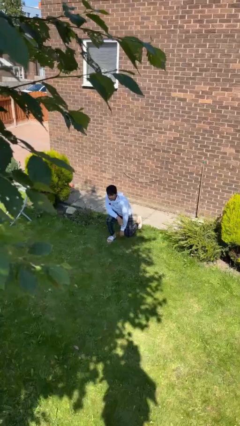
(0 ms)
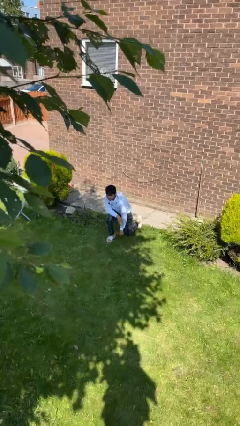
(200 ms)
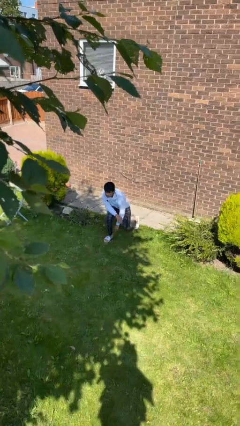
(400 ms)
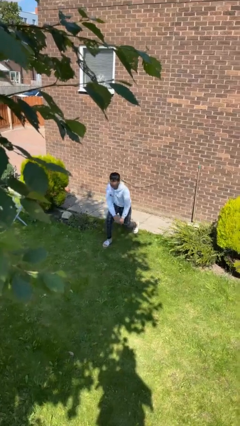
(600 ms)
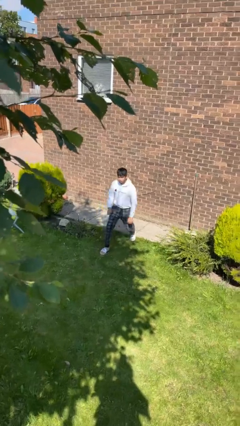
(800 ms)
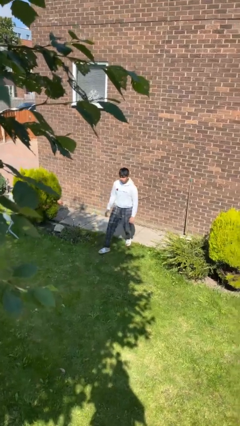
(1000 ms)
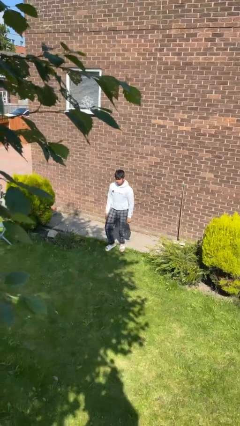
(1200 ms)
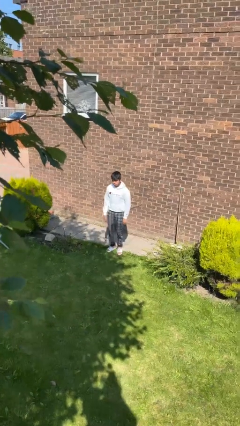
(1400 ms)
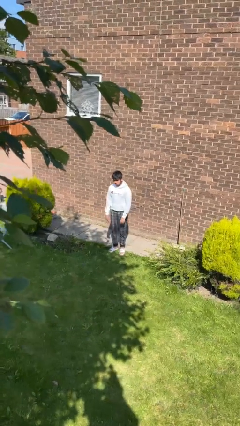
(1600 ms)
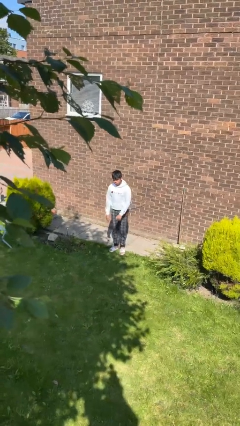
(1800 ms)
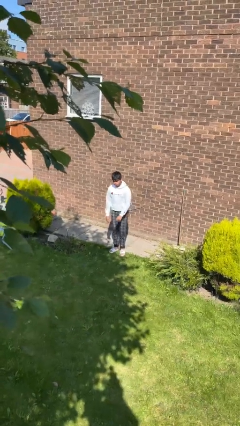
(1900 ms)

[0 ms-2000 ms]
person stands up from floor

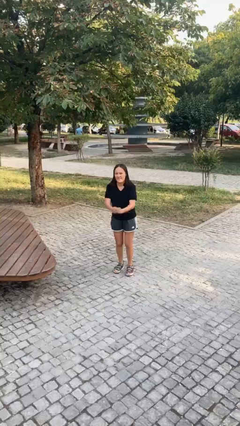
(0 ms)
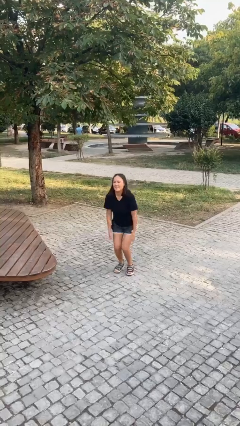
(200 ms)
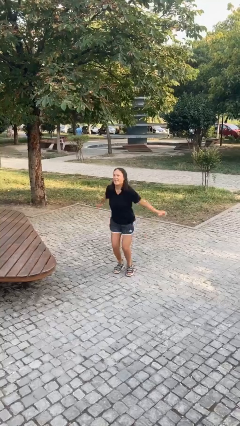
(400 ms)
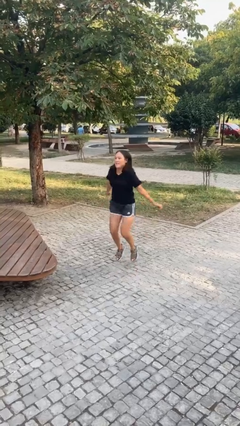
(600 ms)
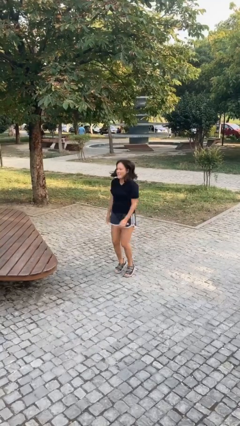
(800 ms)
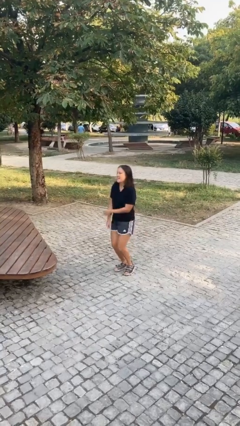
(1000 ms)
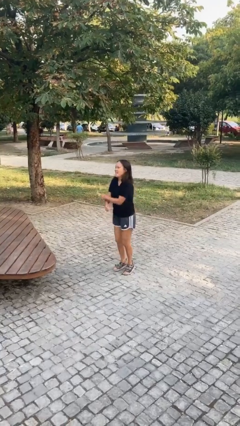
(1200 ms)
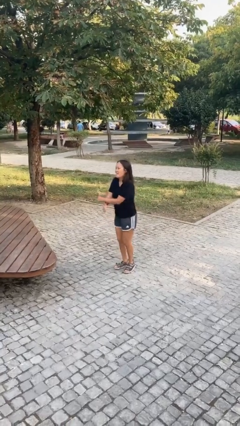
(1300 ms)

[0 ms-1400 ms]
person jumps

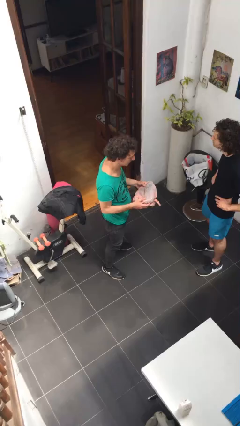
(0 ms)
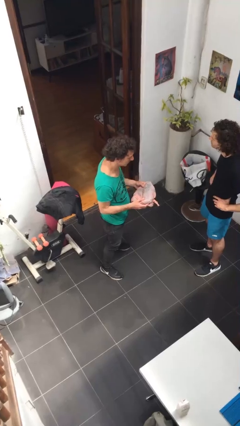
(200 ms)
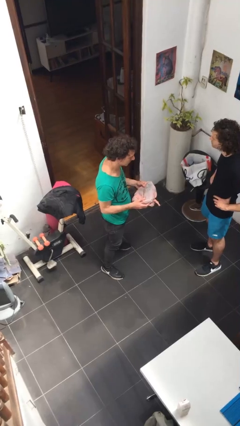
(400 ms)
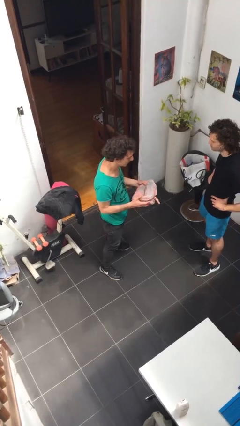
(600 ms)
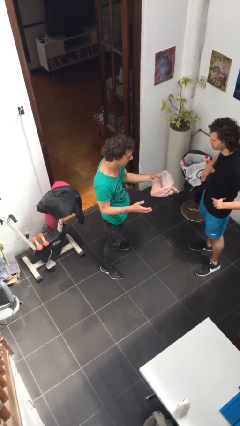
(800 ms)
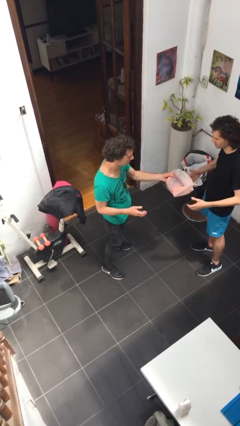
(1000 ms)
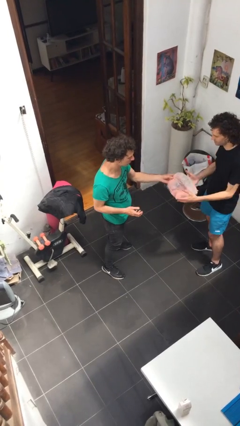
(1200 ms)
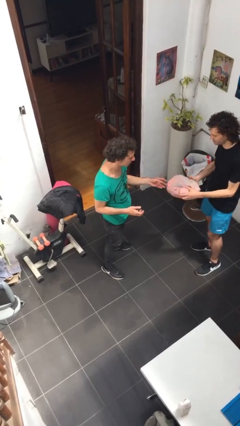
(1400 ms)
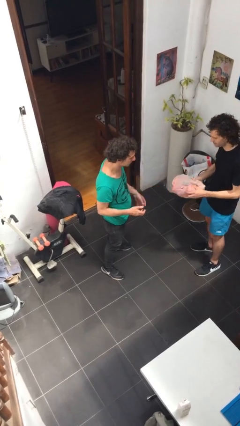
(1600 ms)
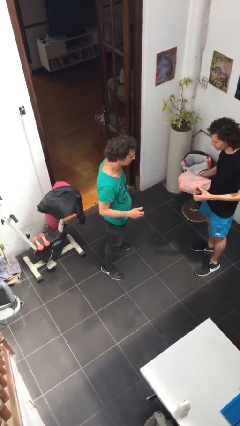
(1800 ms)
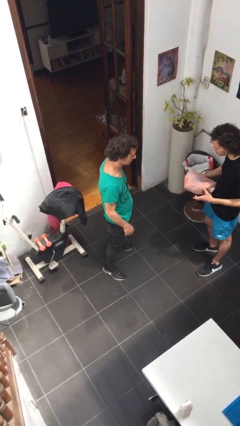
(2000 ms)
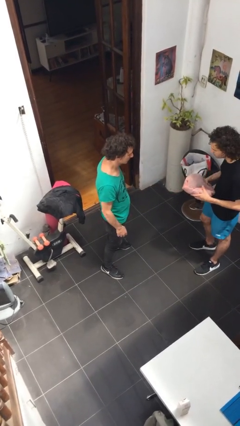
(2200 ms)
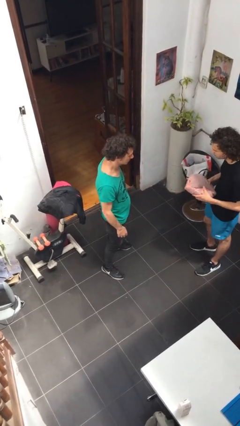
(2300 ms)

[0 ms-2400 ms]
person transfers object to person

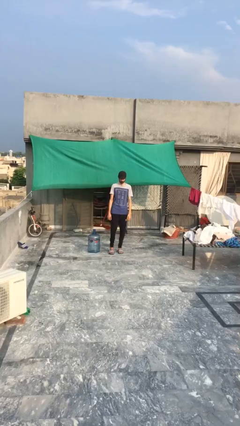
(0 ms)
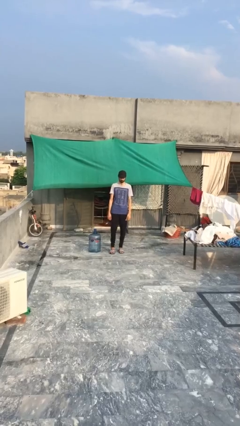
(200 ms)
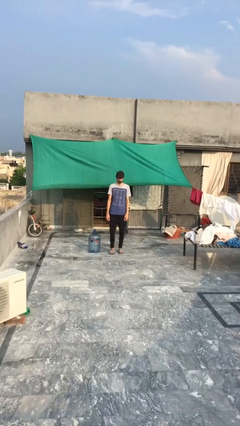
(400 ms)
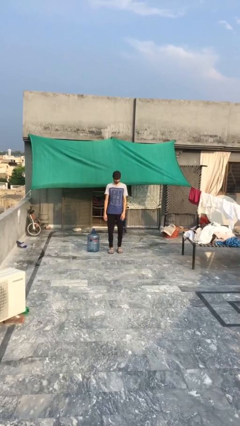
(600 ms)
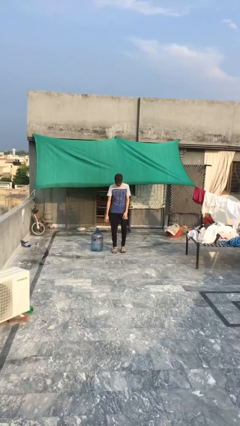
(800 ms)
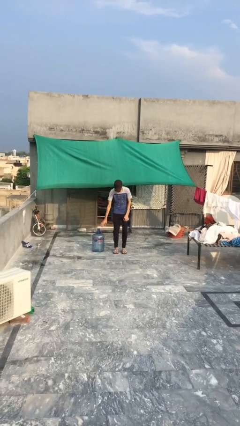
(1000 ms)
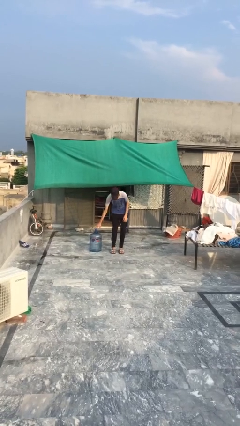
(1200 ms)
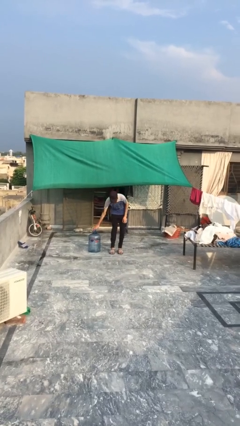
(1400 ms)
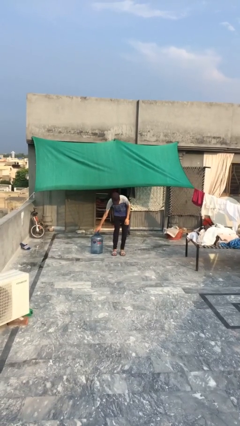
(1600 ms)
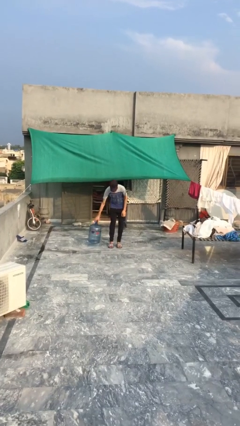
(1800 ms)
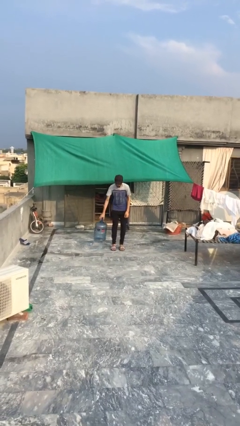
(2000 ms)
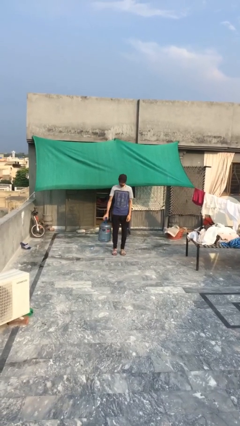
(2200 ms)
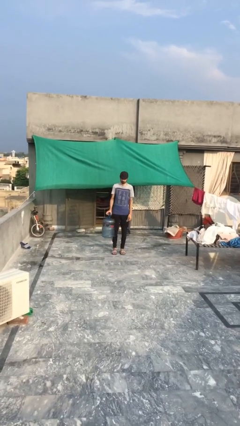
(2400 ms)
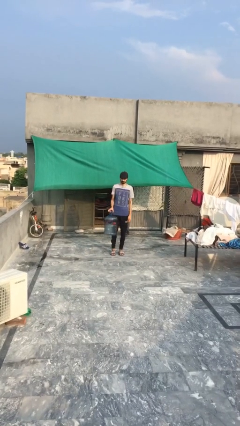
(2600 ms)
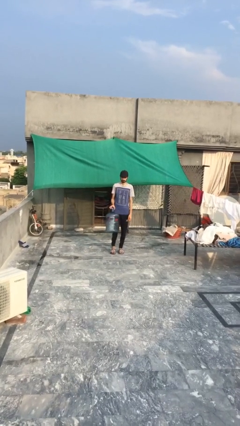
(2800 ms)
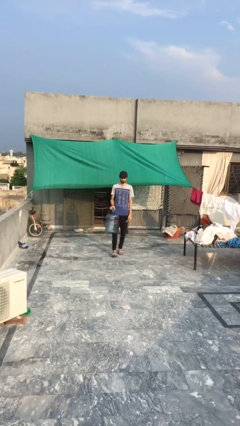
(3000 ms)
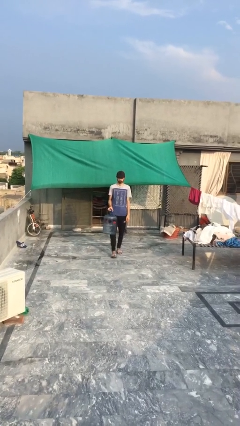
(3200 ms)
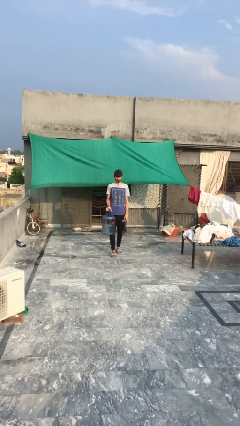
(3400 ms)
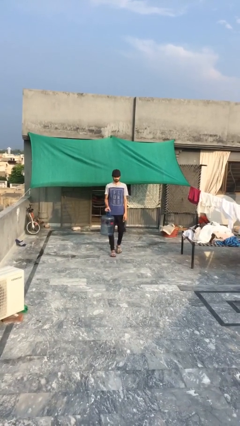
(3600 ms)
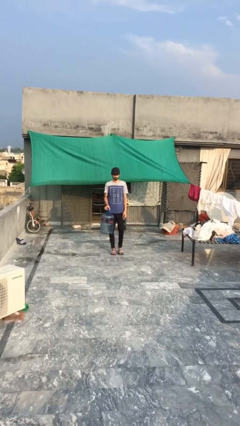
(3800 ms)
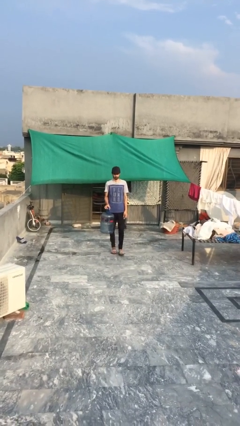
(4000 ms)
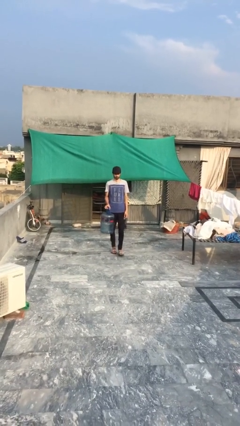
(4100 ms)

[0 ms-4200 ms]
person carries heavy object

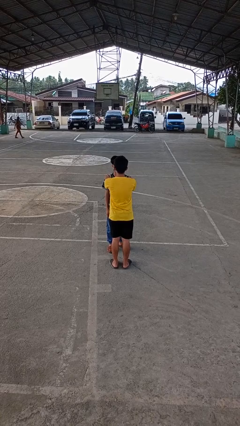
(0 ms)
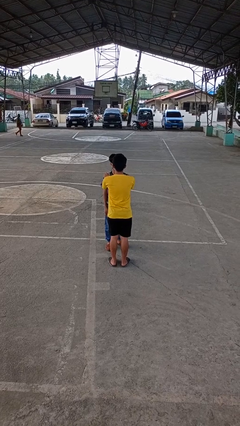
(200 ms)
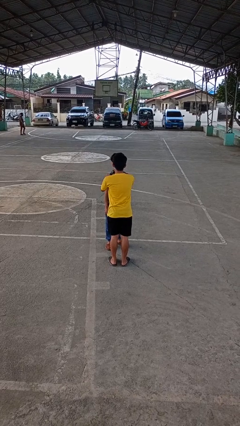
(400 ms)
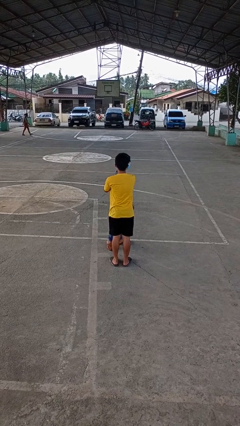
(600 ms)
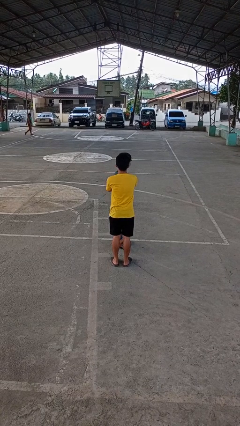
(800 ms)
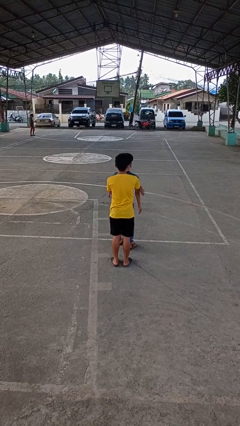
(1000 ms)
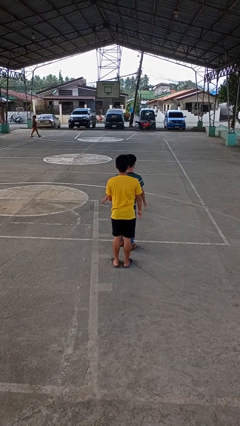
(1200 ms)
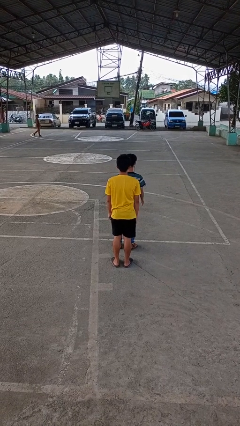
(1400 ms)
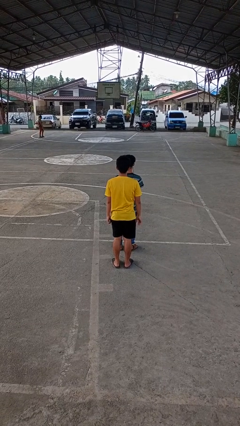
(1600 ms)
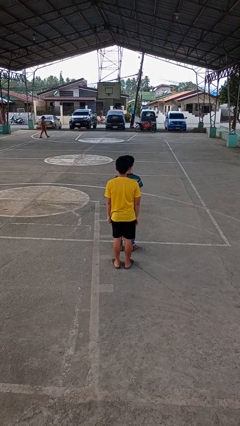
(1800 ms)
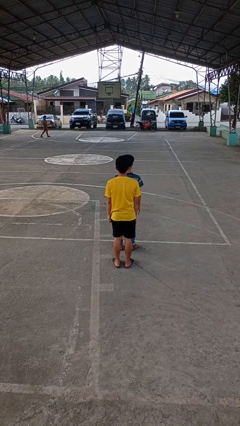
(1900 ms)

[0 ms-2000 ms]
person spins person around

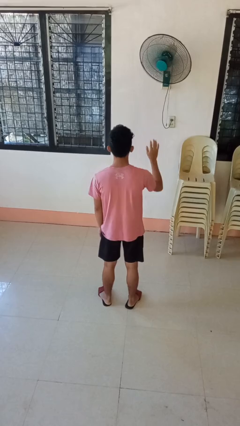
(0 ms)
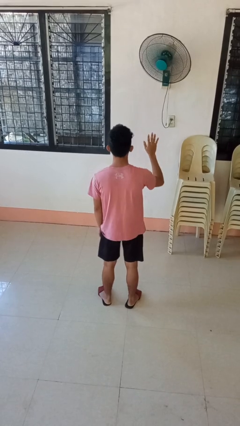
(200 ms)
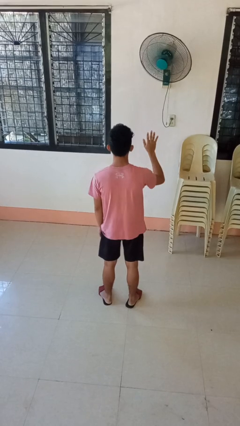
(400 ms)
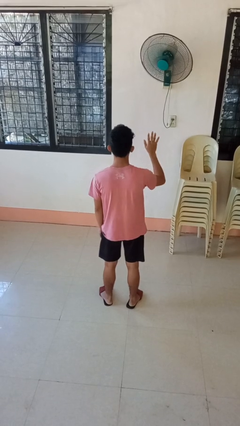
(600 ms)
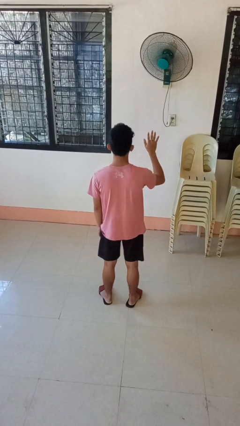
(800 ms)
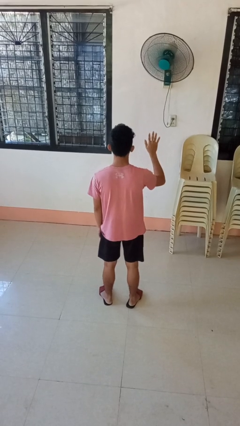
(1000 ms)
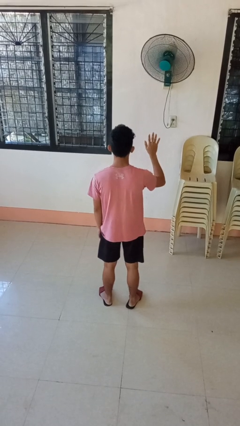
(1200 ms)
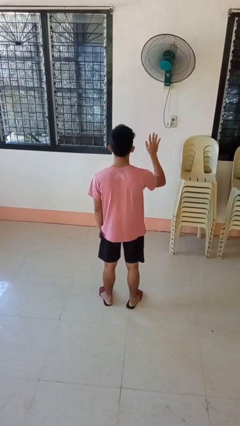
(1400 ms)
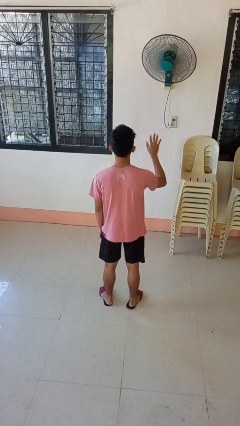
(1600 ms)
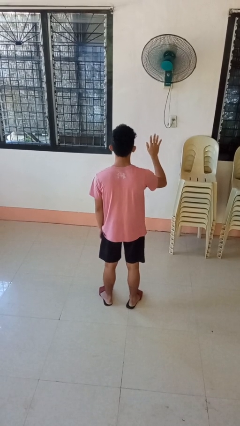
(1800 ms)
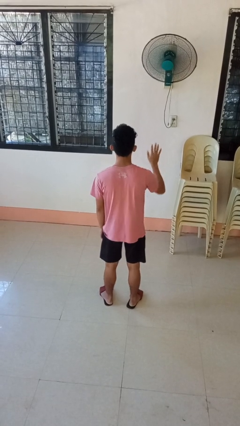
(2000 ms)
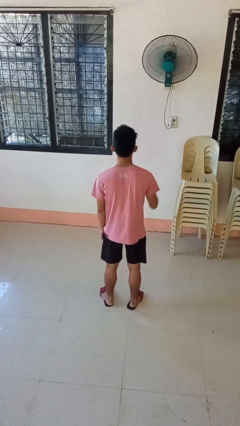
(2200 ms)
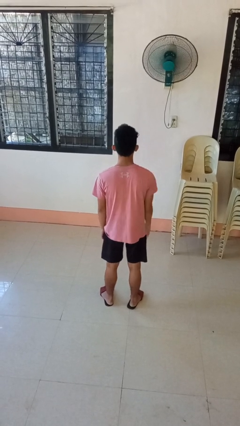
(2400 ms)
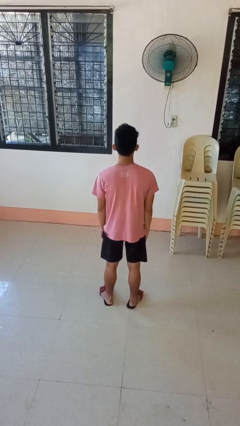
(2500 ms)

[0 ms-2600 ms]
person gestures number five

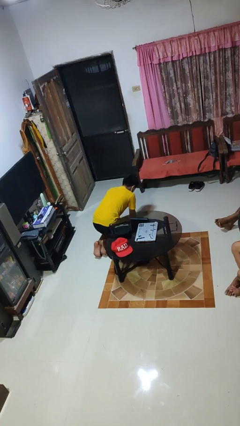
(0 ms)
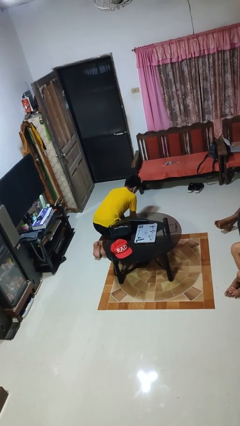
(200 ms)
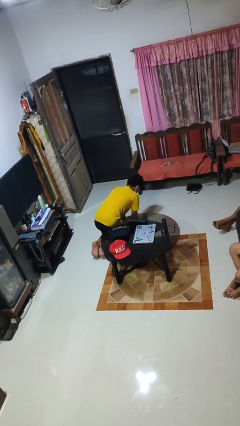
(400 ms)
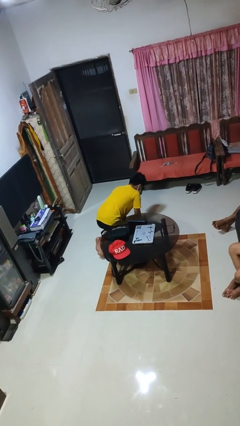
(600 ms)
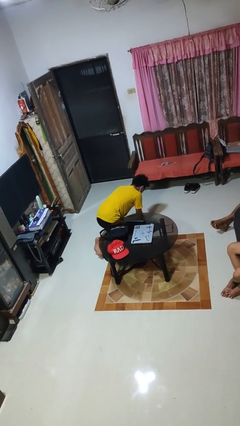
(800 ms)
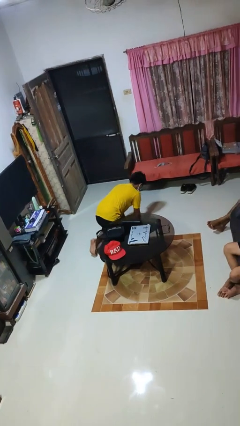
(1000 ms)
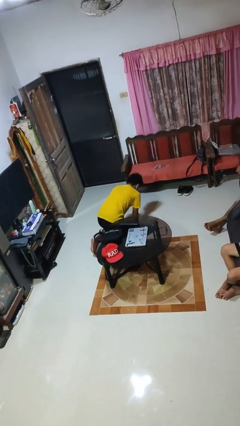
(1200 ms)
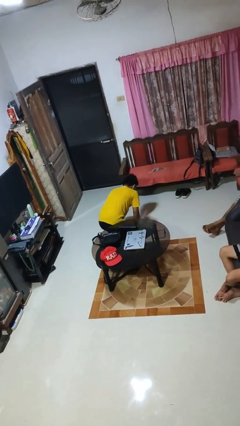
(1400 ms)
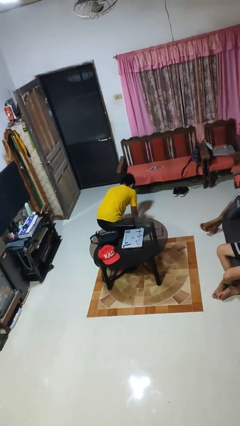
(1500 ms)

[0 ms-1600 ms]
person crawls

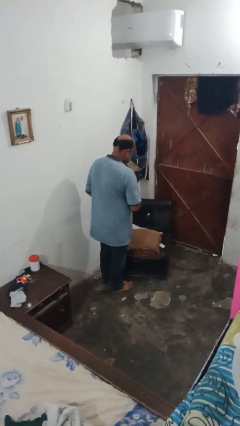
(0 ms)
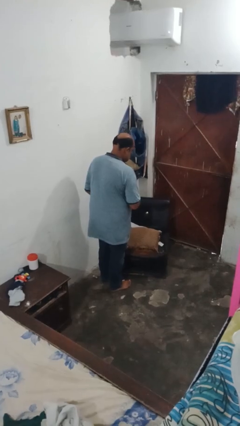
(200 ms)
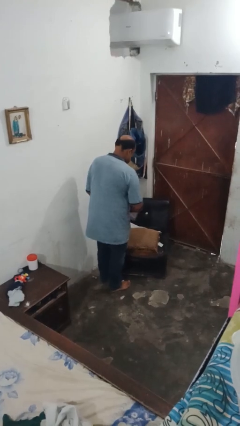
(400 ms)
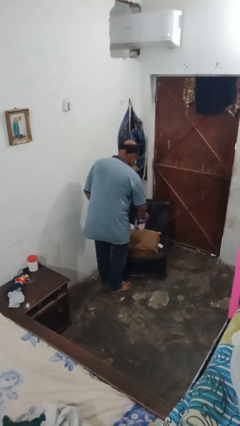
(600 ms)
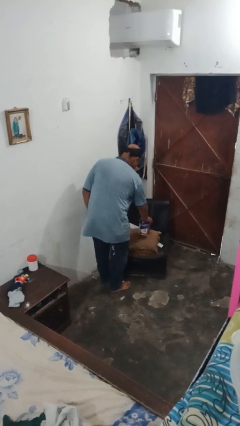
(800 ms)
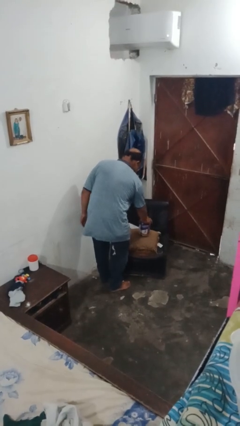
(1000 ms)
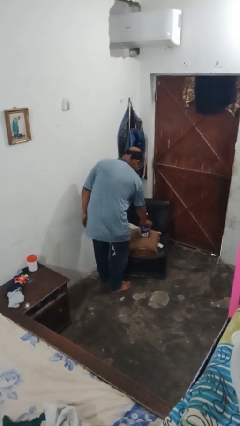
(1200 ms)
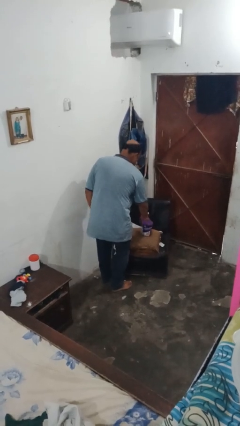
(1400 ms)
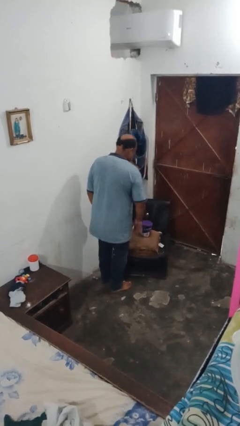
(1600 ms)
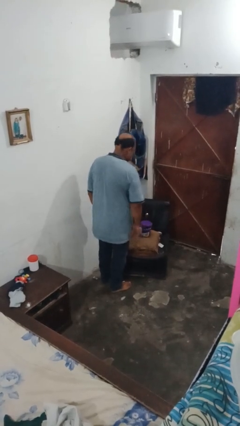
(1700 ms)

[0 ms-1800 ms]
person puts down object on couch
